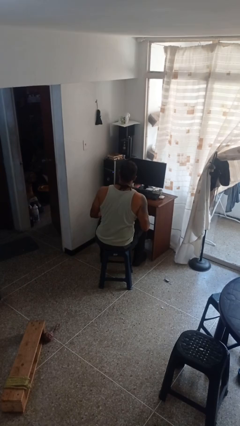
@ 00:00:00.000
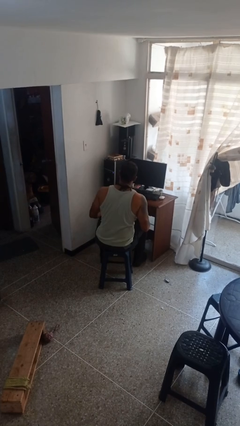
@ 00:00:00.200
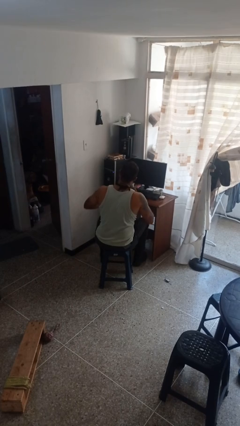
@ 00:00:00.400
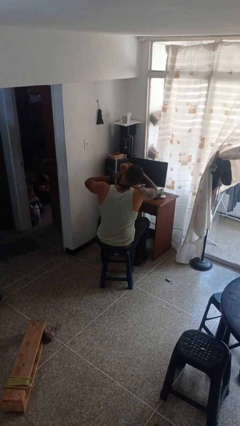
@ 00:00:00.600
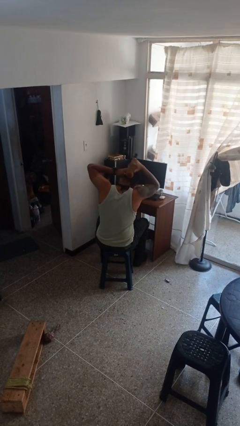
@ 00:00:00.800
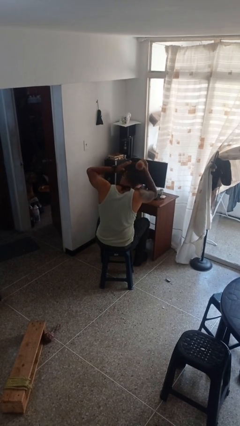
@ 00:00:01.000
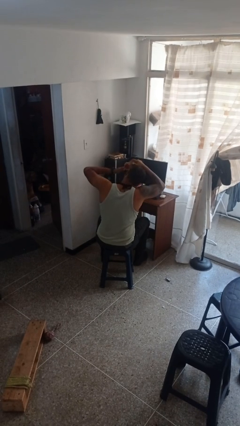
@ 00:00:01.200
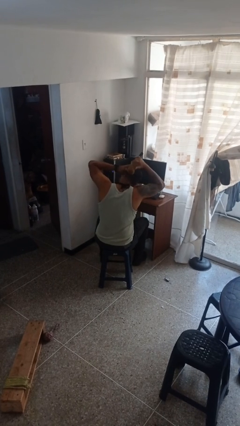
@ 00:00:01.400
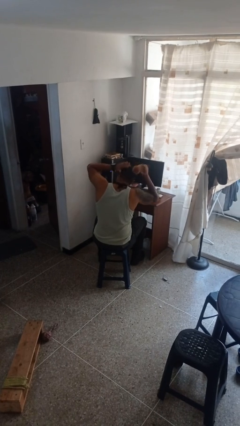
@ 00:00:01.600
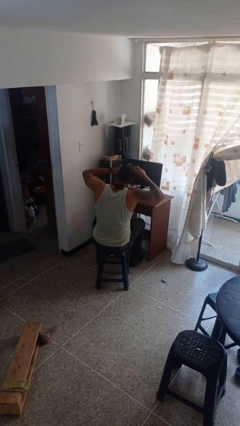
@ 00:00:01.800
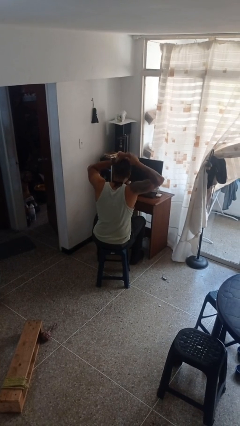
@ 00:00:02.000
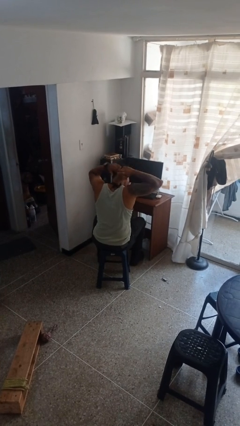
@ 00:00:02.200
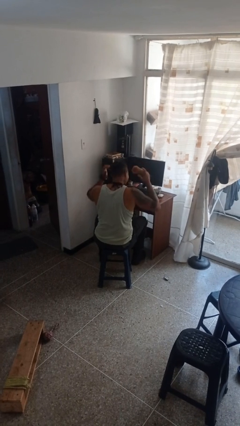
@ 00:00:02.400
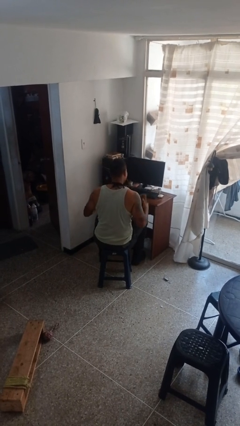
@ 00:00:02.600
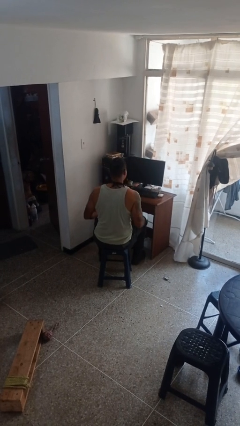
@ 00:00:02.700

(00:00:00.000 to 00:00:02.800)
person brushes hair

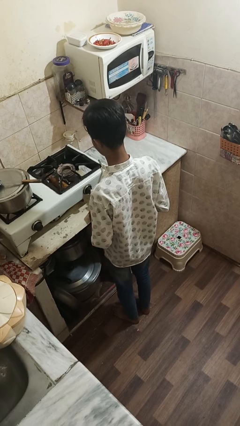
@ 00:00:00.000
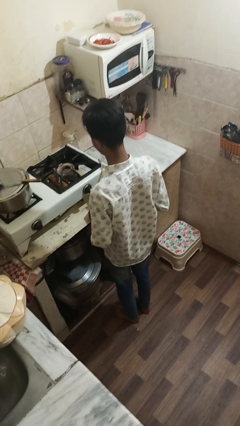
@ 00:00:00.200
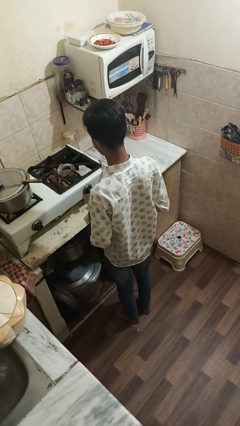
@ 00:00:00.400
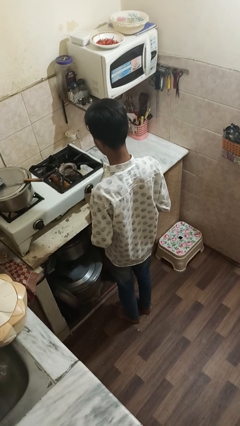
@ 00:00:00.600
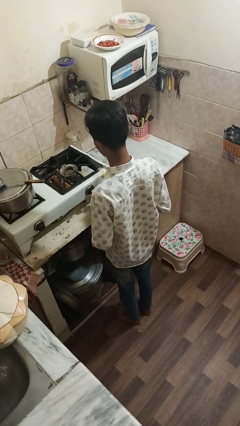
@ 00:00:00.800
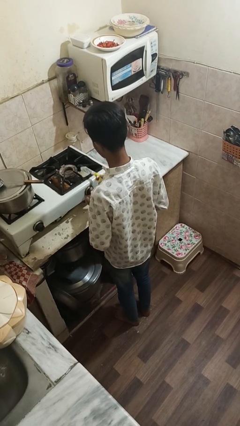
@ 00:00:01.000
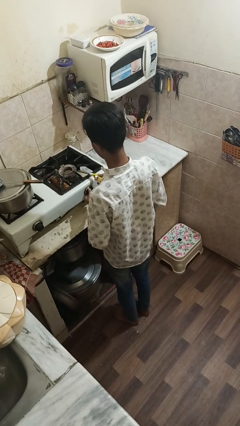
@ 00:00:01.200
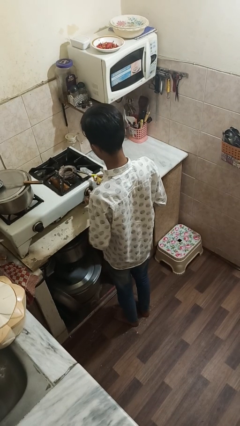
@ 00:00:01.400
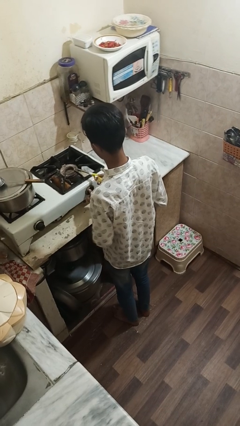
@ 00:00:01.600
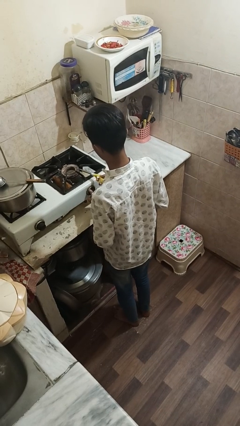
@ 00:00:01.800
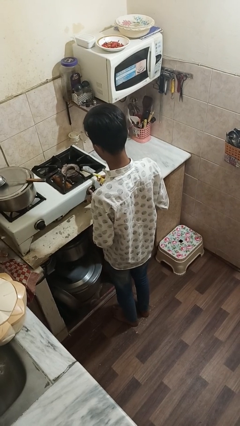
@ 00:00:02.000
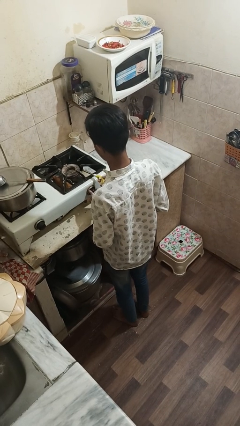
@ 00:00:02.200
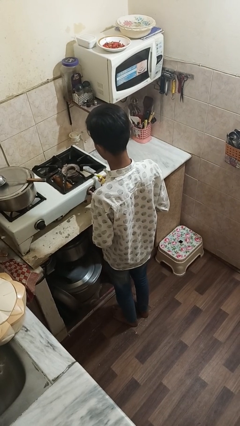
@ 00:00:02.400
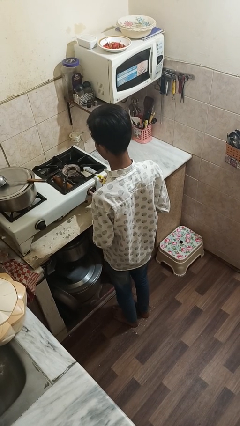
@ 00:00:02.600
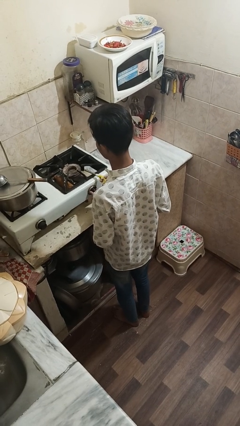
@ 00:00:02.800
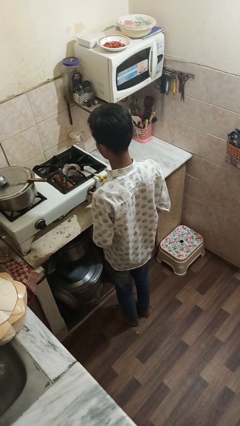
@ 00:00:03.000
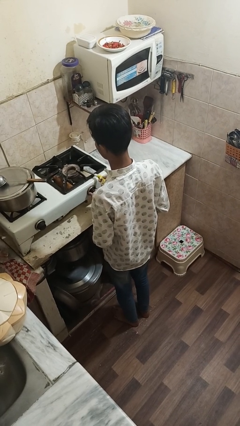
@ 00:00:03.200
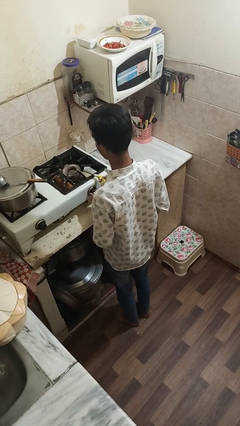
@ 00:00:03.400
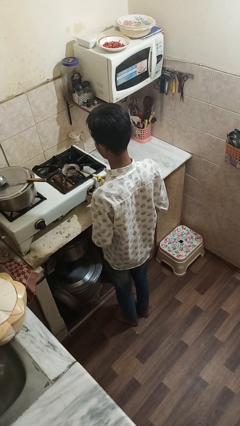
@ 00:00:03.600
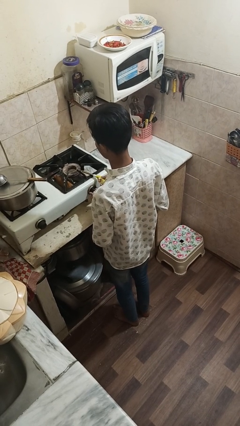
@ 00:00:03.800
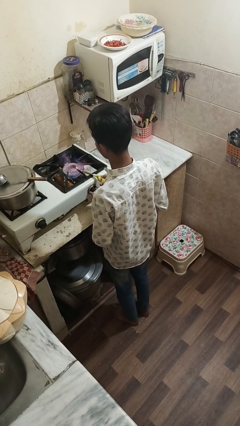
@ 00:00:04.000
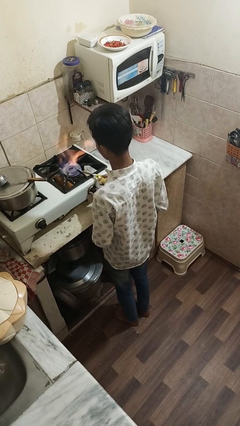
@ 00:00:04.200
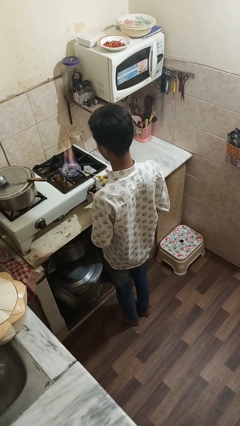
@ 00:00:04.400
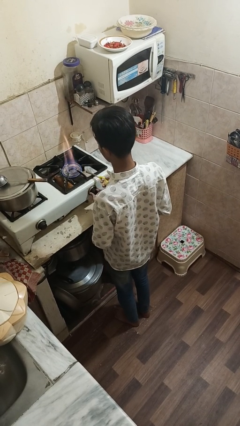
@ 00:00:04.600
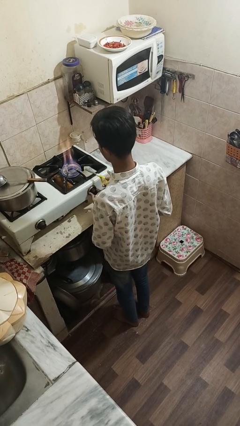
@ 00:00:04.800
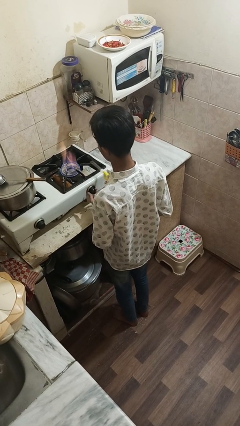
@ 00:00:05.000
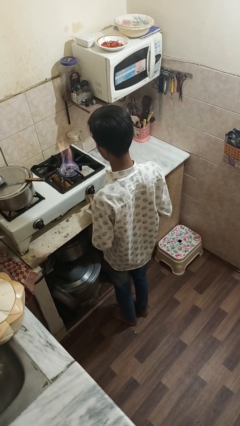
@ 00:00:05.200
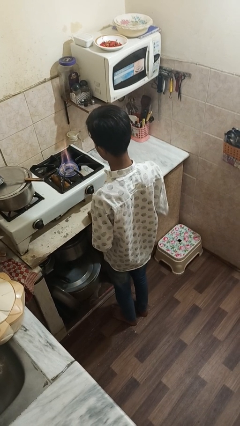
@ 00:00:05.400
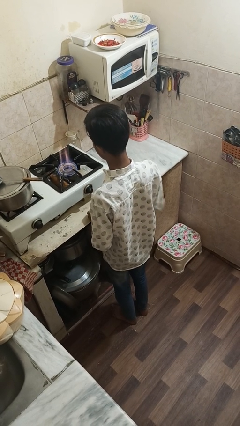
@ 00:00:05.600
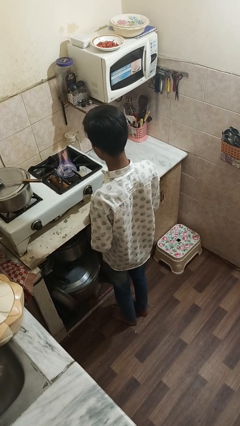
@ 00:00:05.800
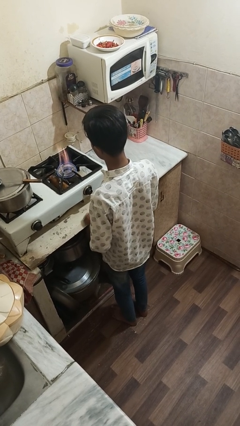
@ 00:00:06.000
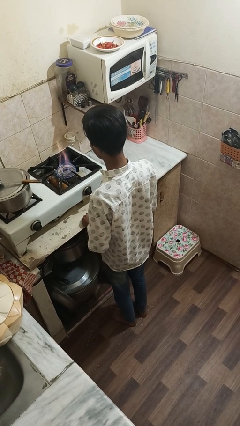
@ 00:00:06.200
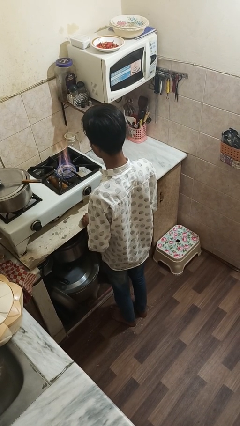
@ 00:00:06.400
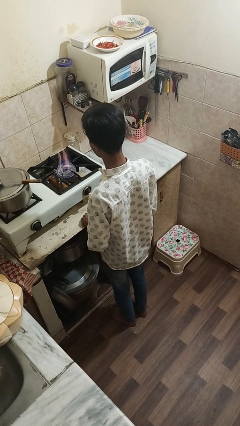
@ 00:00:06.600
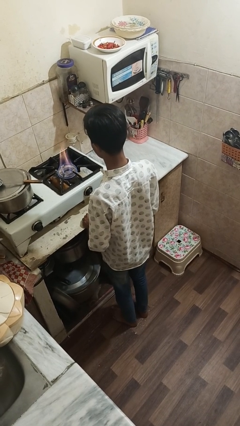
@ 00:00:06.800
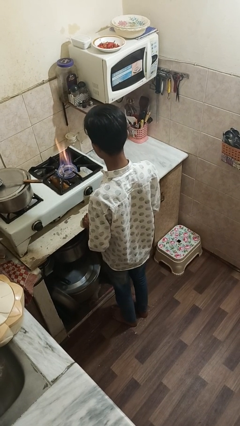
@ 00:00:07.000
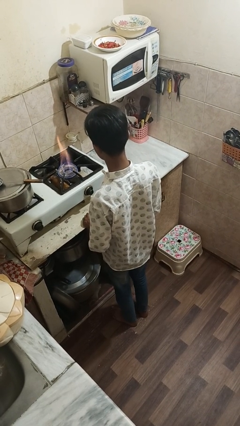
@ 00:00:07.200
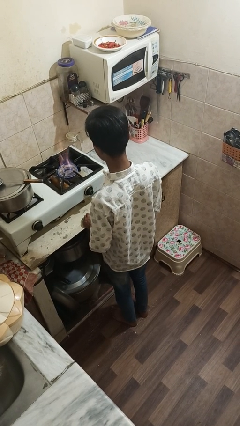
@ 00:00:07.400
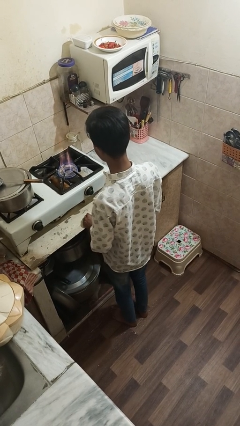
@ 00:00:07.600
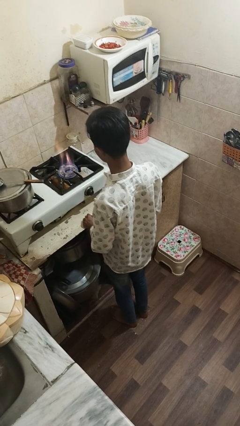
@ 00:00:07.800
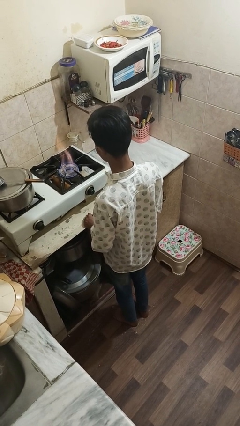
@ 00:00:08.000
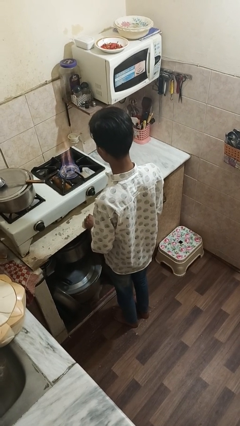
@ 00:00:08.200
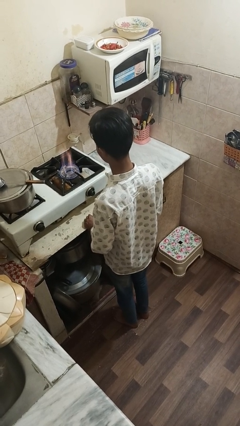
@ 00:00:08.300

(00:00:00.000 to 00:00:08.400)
person turns on stovetop

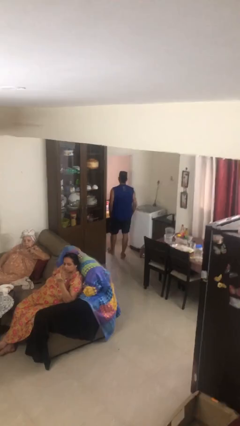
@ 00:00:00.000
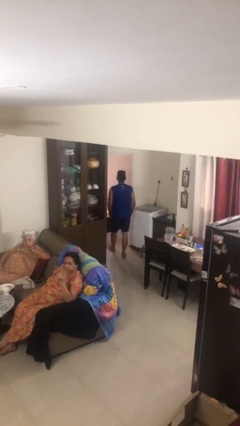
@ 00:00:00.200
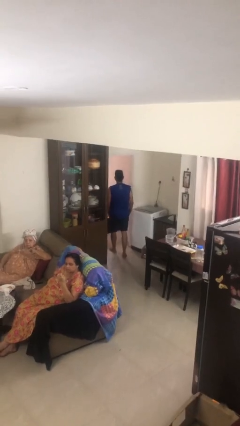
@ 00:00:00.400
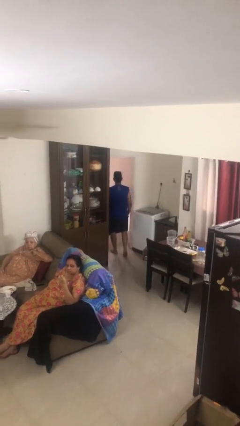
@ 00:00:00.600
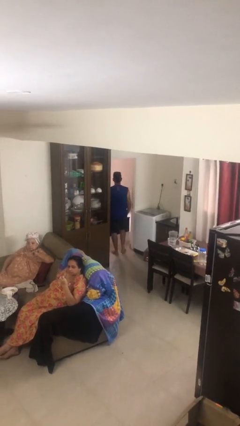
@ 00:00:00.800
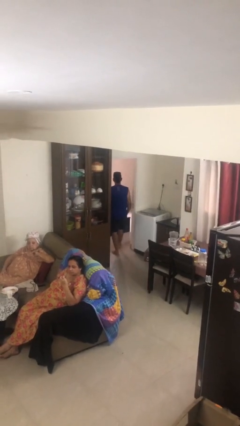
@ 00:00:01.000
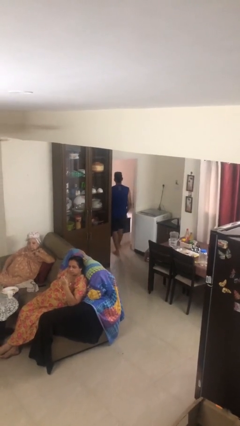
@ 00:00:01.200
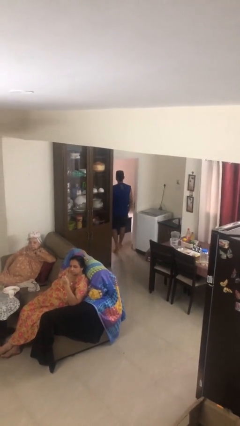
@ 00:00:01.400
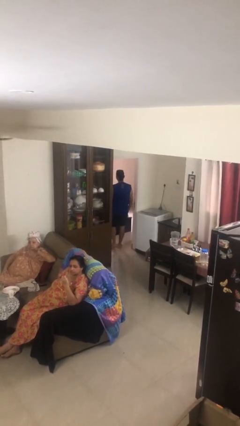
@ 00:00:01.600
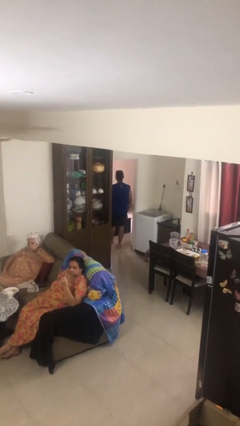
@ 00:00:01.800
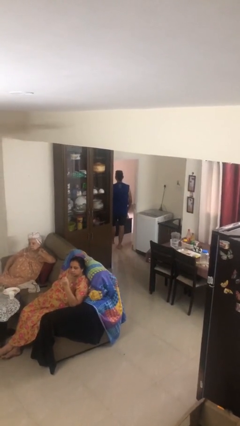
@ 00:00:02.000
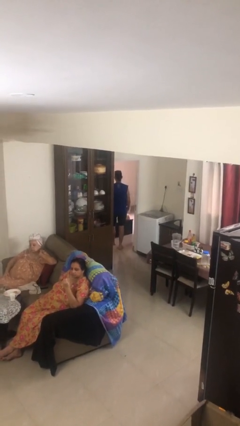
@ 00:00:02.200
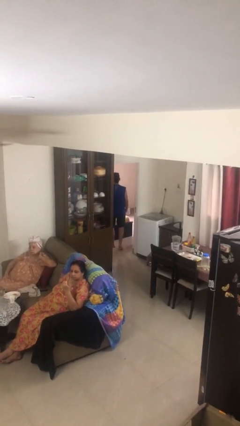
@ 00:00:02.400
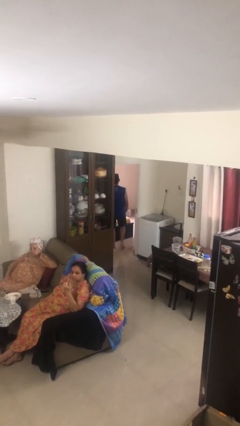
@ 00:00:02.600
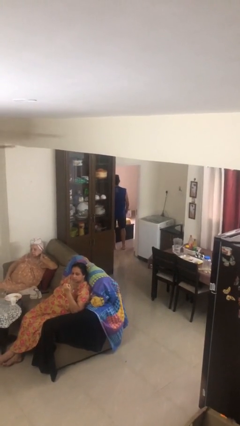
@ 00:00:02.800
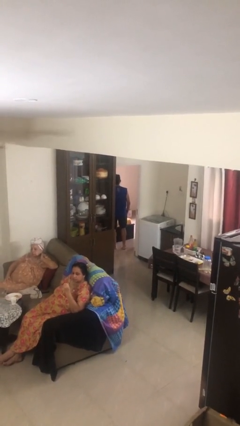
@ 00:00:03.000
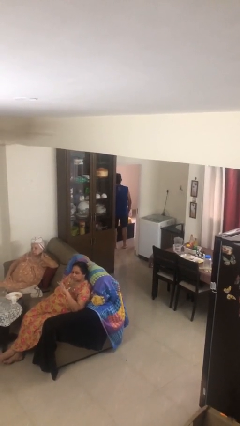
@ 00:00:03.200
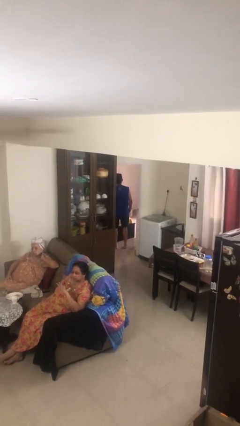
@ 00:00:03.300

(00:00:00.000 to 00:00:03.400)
person exits scene through structure

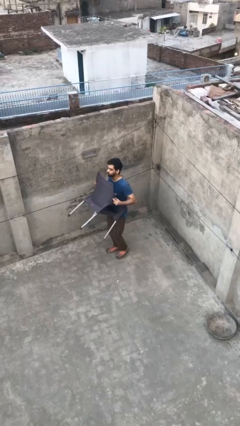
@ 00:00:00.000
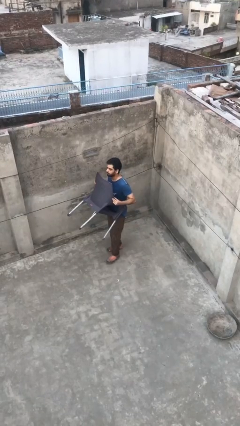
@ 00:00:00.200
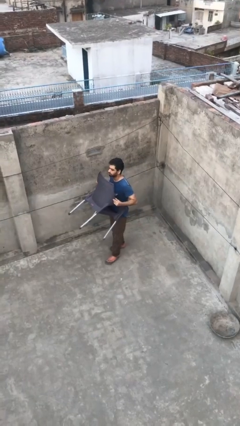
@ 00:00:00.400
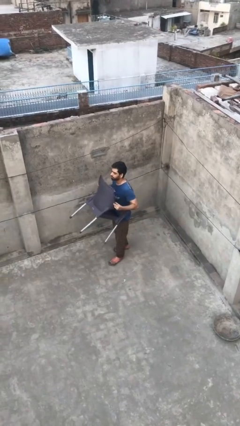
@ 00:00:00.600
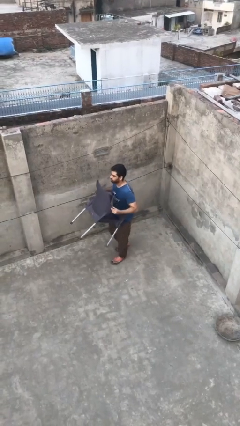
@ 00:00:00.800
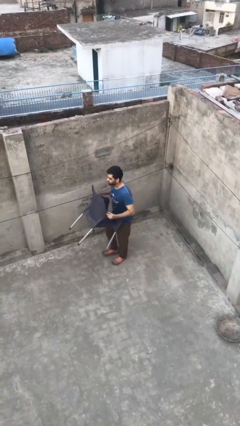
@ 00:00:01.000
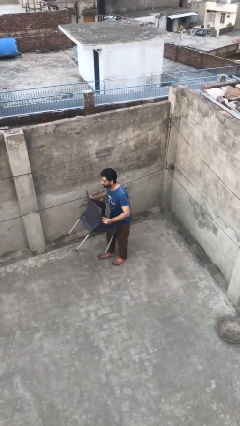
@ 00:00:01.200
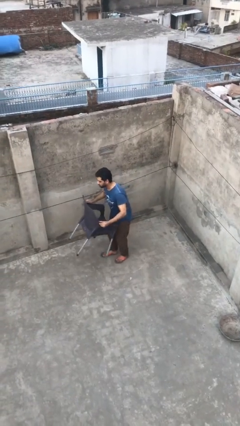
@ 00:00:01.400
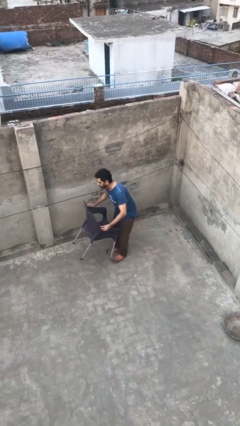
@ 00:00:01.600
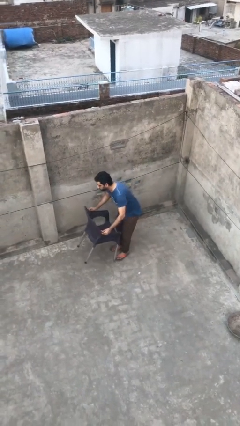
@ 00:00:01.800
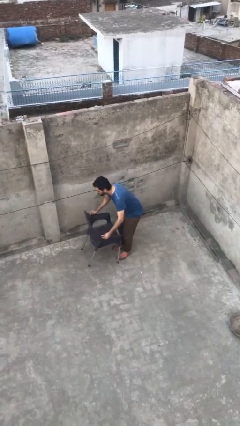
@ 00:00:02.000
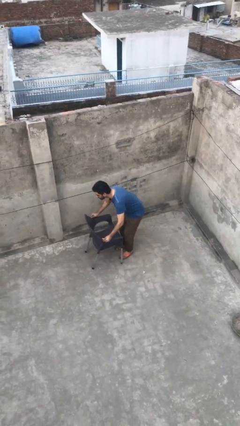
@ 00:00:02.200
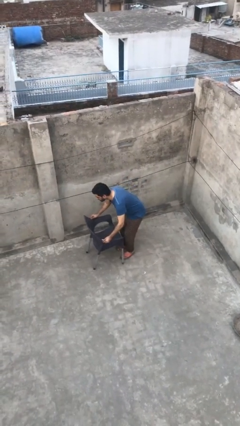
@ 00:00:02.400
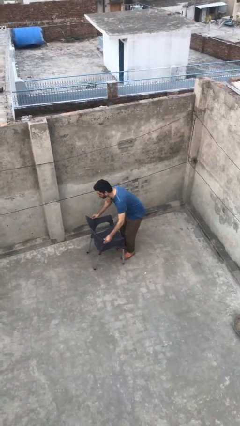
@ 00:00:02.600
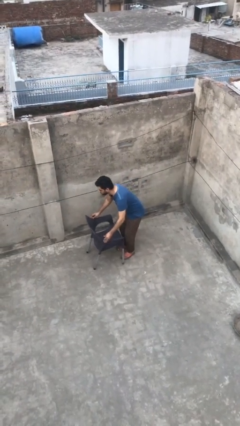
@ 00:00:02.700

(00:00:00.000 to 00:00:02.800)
person puts down object on floor
